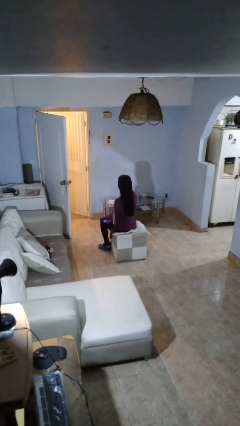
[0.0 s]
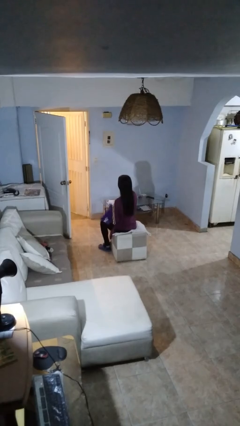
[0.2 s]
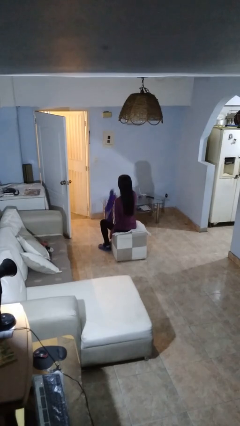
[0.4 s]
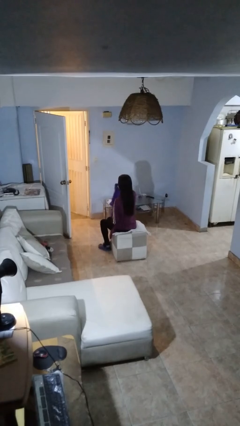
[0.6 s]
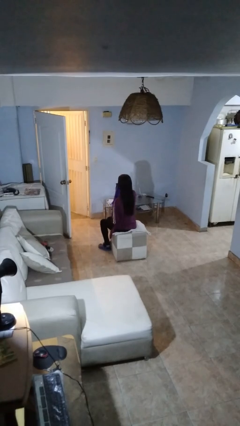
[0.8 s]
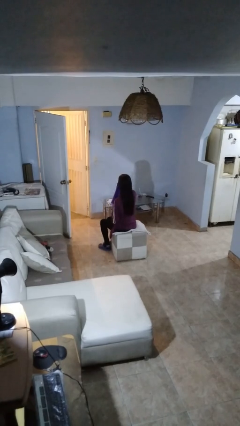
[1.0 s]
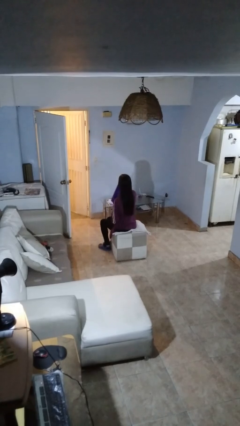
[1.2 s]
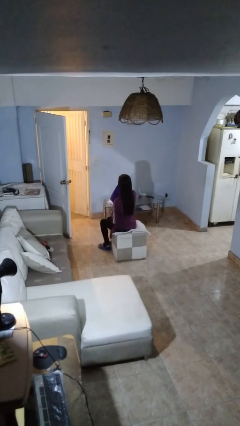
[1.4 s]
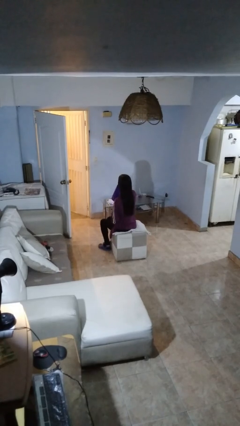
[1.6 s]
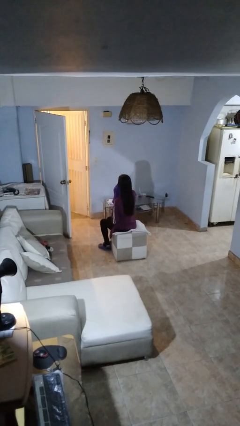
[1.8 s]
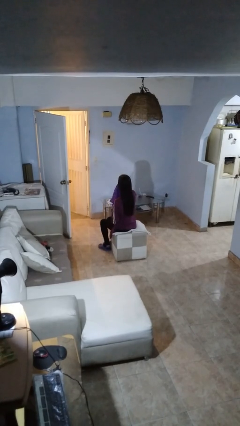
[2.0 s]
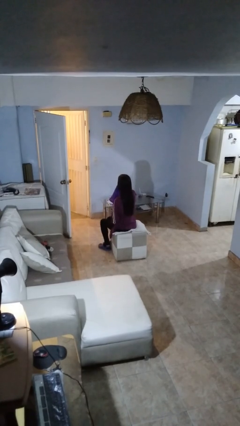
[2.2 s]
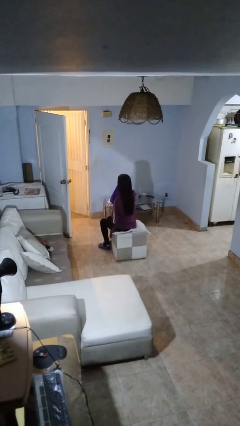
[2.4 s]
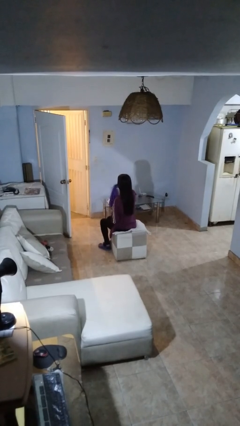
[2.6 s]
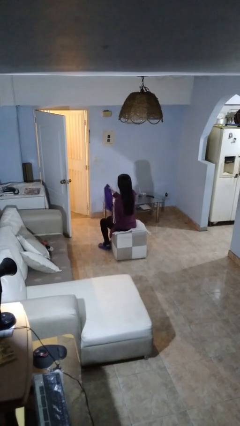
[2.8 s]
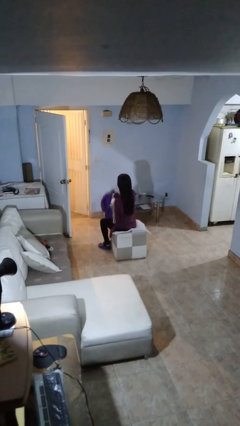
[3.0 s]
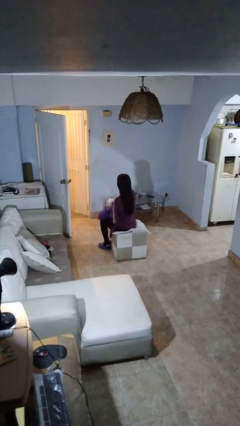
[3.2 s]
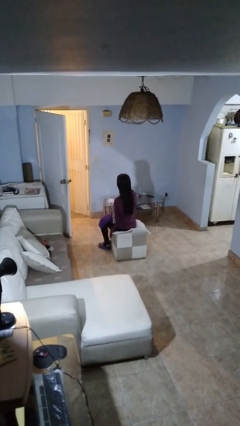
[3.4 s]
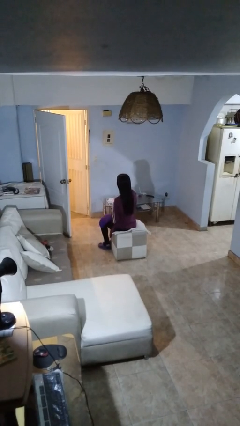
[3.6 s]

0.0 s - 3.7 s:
person wipes mouth with napkin

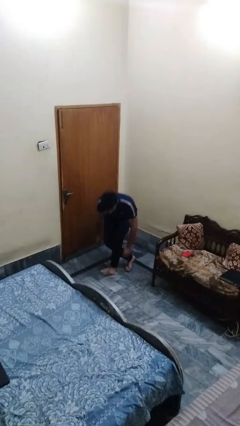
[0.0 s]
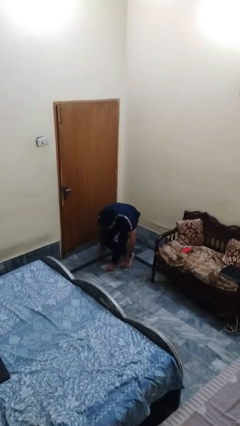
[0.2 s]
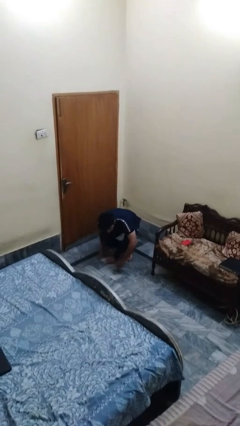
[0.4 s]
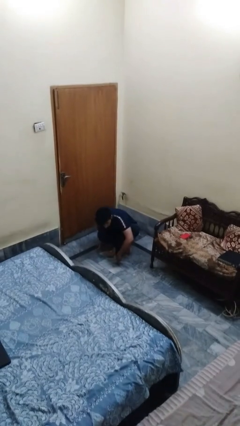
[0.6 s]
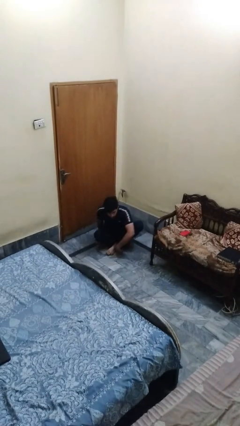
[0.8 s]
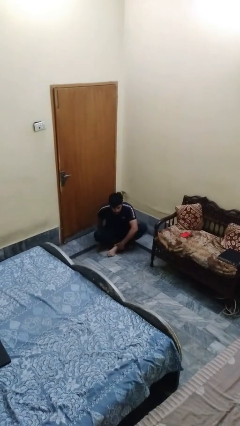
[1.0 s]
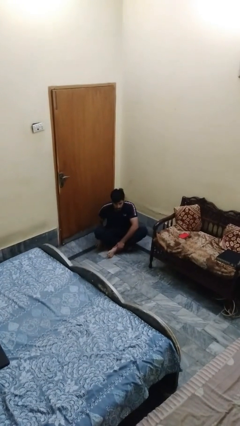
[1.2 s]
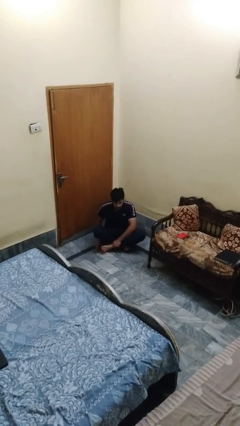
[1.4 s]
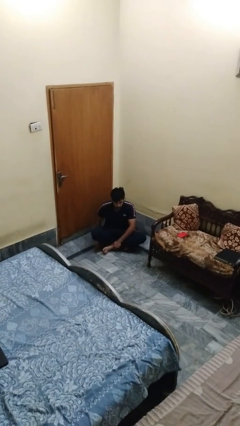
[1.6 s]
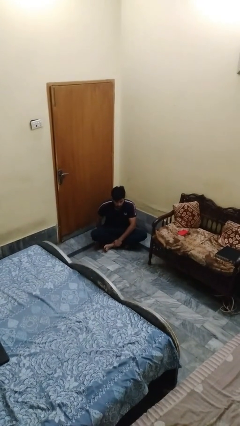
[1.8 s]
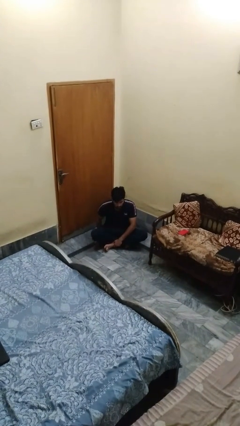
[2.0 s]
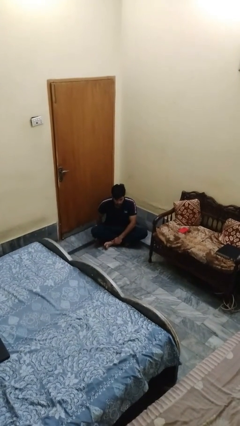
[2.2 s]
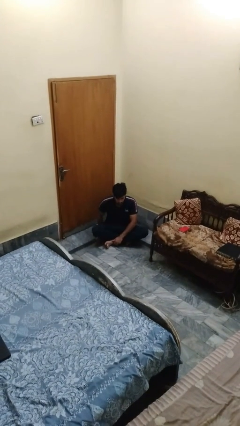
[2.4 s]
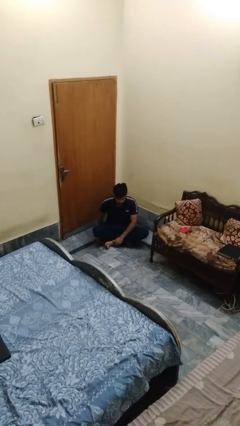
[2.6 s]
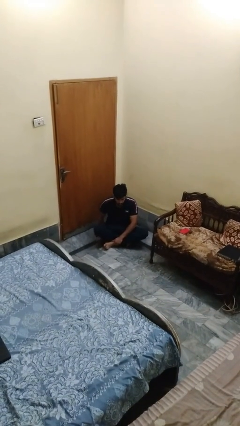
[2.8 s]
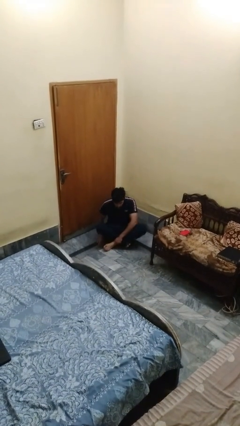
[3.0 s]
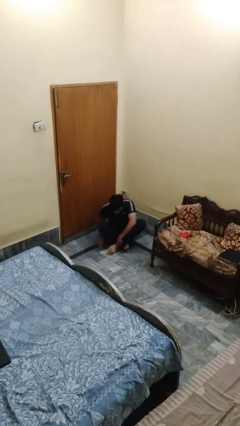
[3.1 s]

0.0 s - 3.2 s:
person sits crisscross

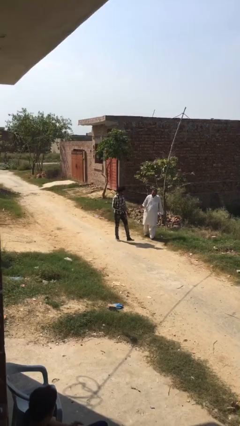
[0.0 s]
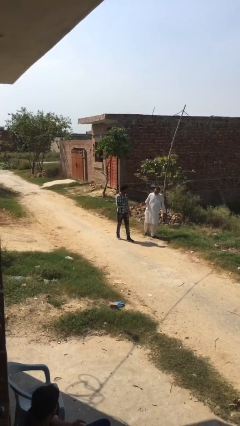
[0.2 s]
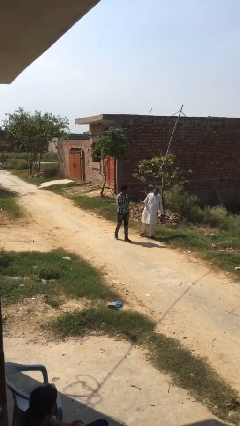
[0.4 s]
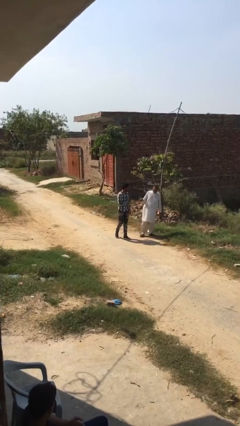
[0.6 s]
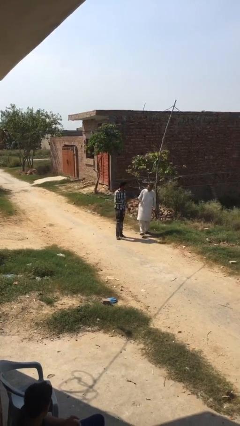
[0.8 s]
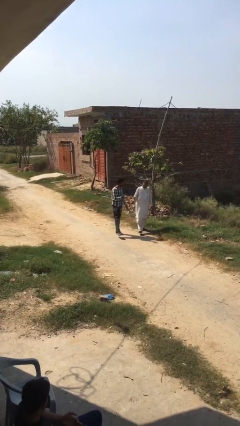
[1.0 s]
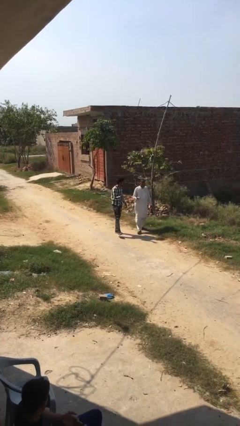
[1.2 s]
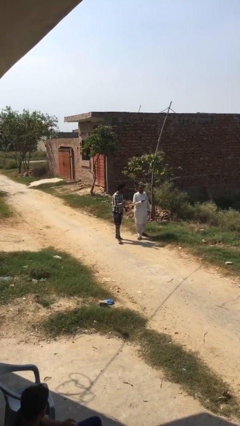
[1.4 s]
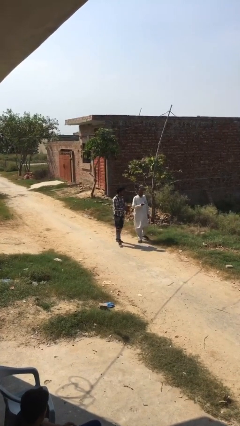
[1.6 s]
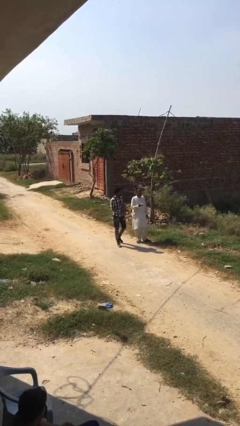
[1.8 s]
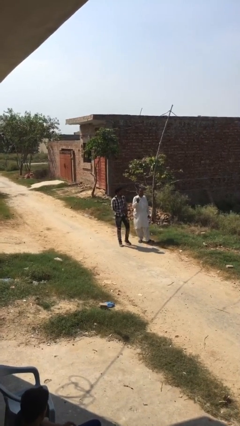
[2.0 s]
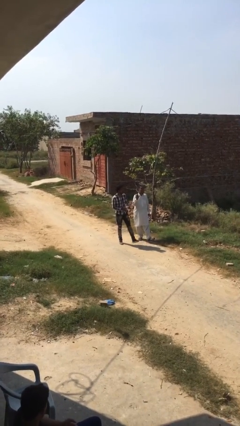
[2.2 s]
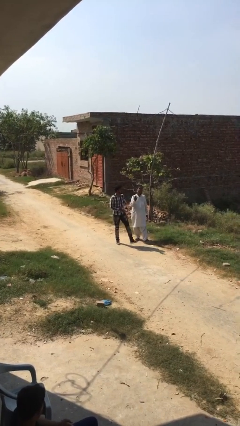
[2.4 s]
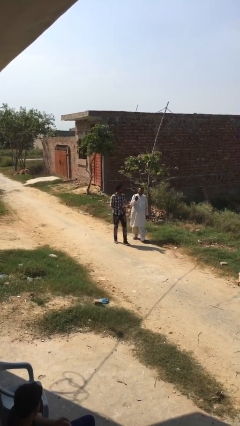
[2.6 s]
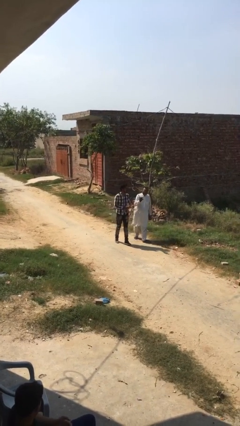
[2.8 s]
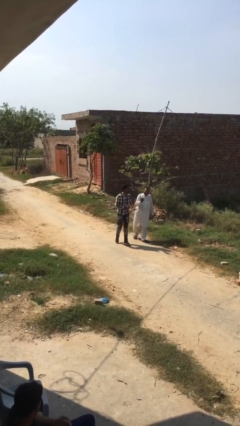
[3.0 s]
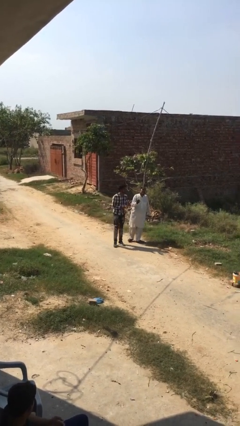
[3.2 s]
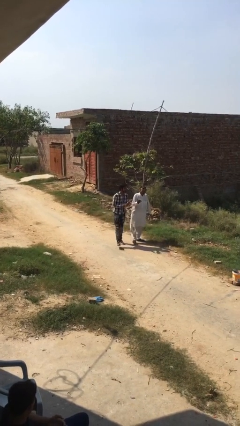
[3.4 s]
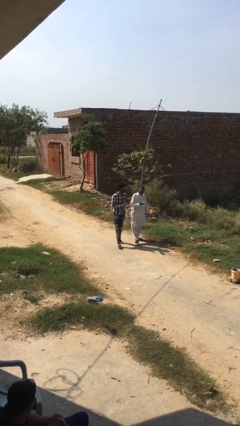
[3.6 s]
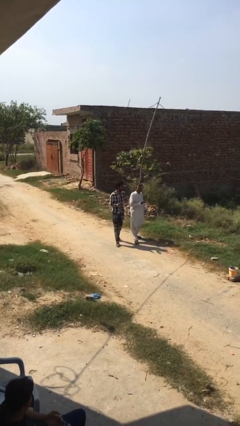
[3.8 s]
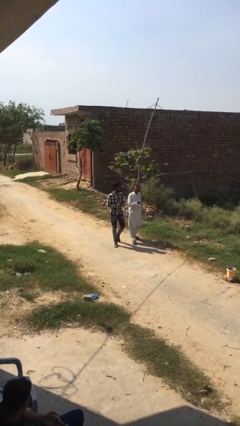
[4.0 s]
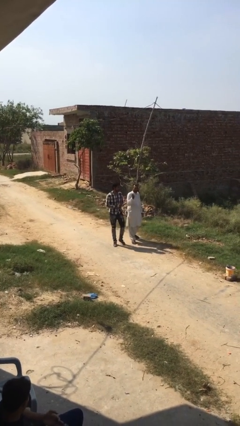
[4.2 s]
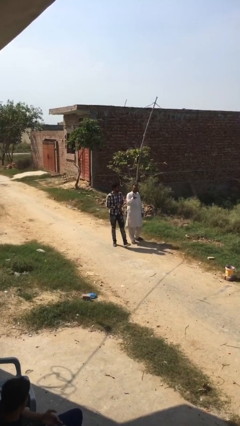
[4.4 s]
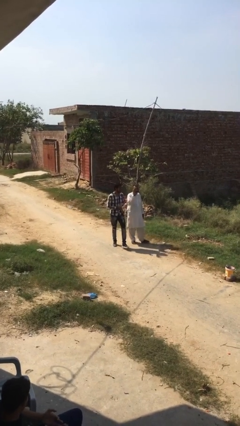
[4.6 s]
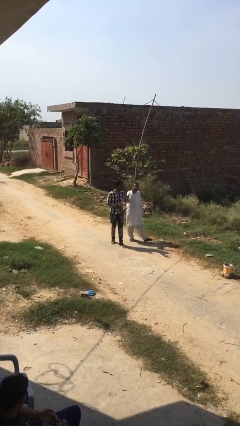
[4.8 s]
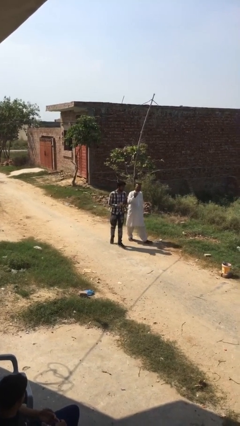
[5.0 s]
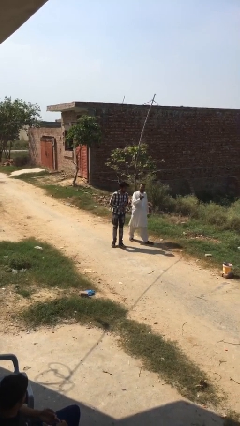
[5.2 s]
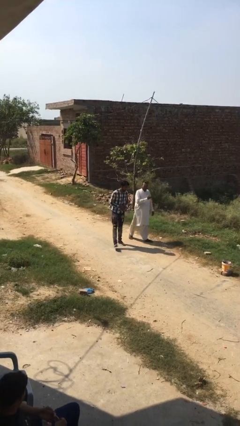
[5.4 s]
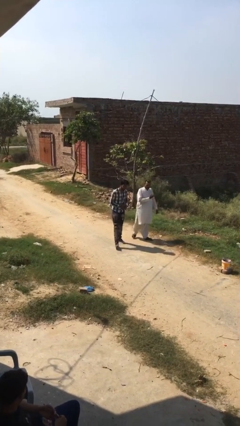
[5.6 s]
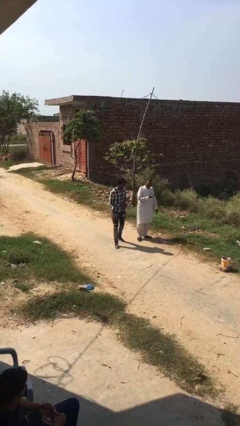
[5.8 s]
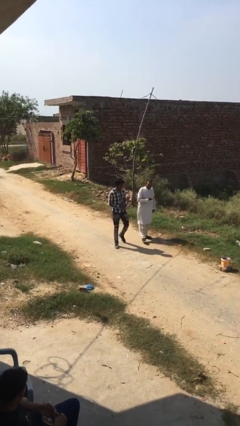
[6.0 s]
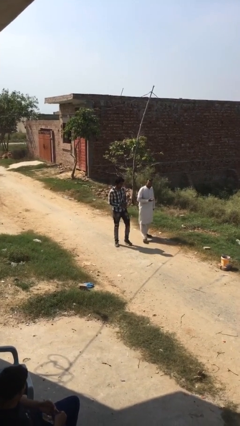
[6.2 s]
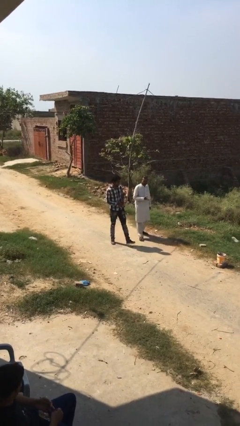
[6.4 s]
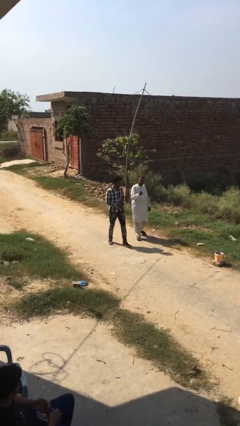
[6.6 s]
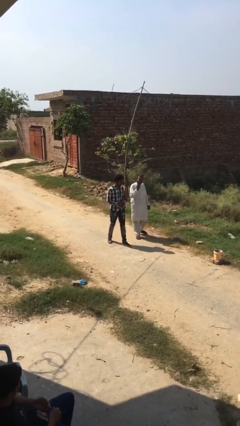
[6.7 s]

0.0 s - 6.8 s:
person talks to person

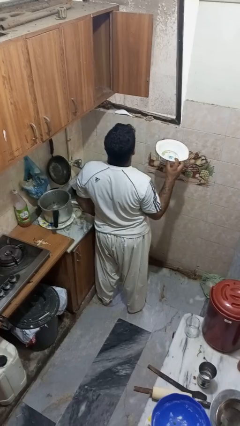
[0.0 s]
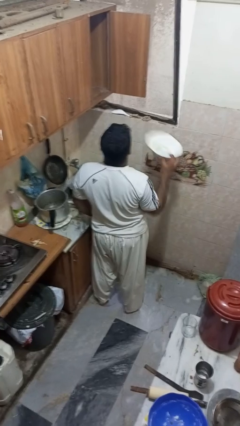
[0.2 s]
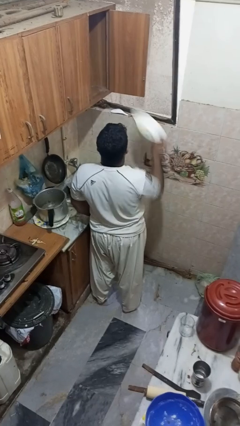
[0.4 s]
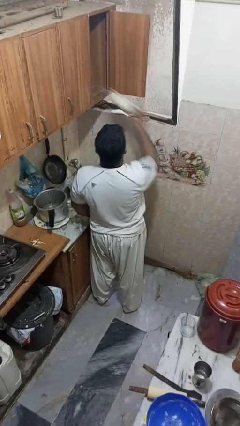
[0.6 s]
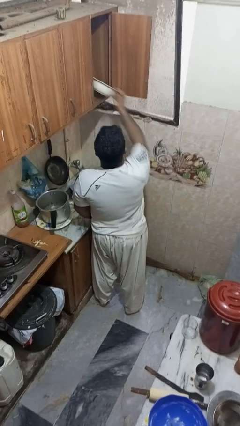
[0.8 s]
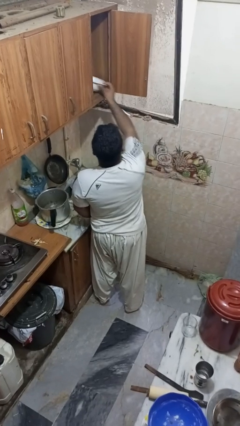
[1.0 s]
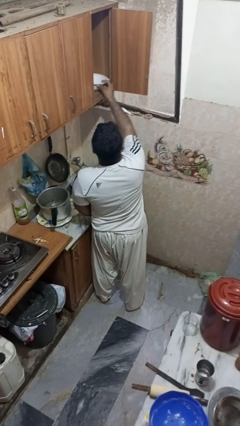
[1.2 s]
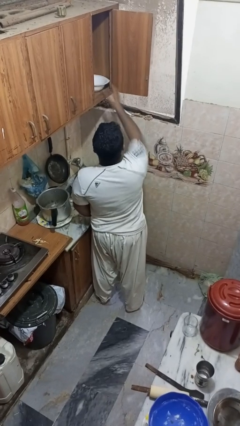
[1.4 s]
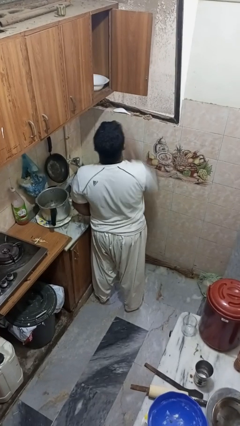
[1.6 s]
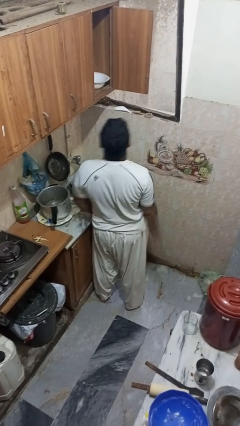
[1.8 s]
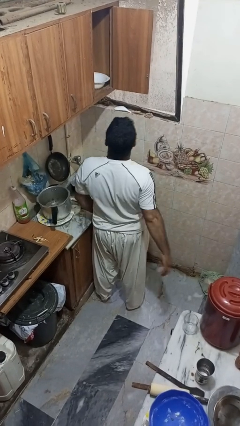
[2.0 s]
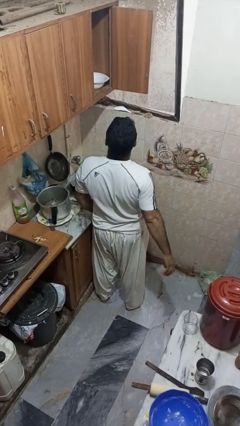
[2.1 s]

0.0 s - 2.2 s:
person puts object in cabinet

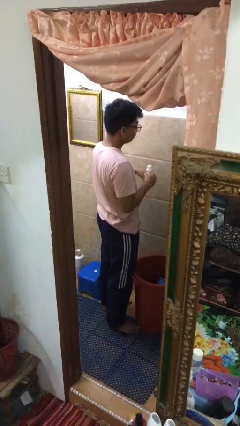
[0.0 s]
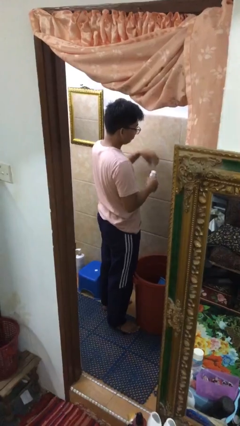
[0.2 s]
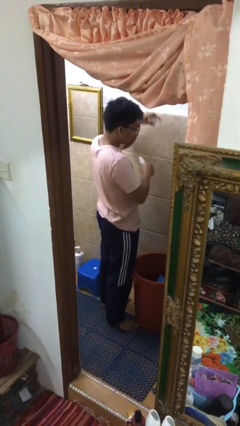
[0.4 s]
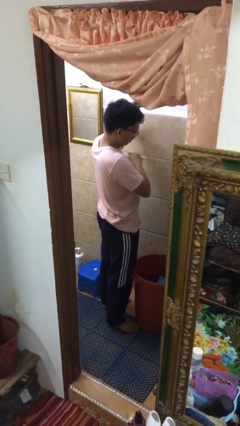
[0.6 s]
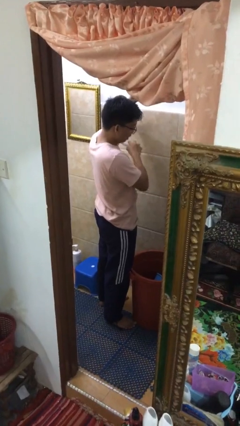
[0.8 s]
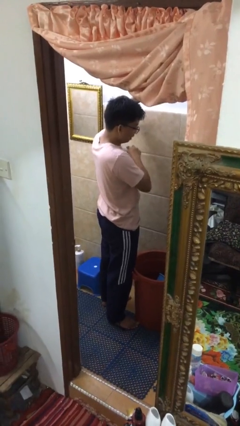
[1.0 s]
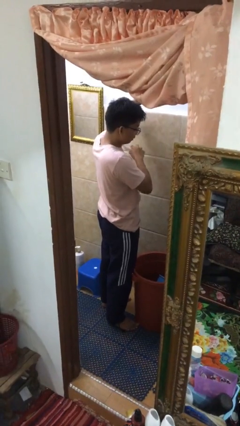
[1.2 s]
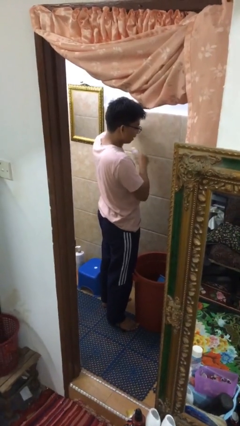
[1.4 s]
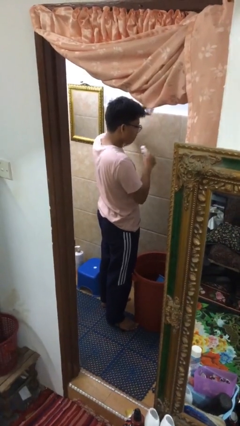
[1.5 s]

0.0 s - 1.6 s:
person applies deodorant

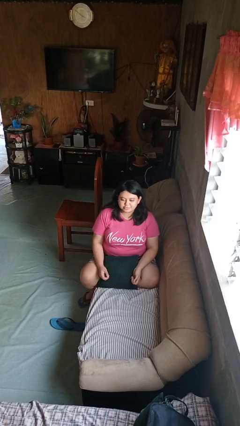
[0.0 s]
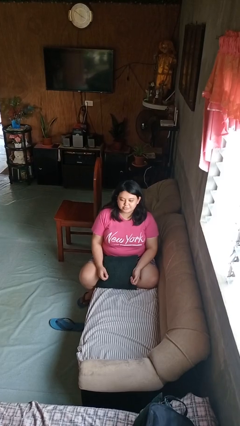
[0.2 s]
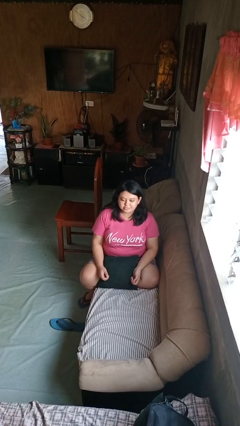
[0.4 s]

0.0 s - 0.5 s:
person shrugs
